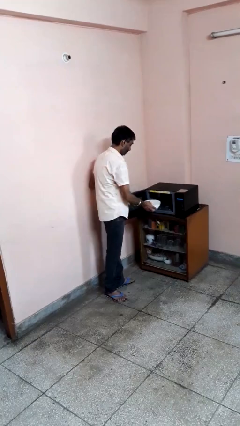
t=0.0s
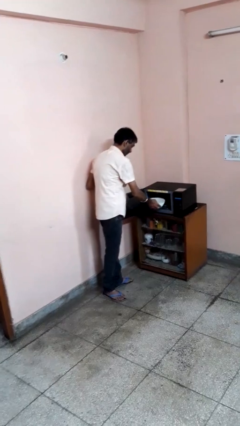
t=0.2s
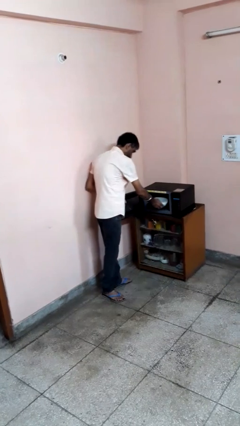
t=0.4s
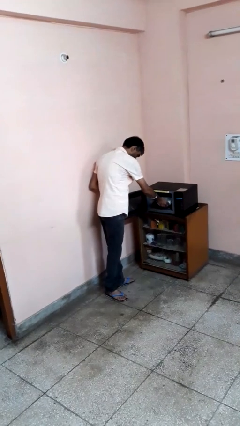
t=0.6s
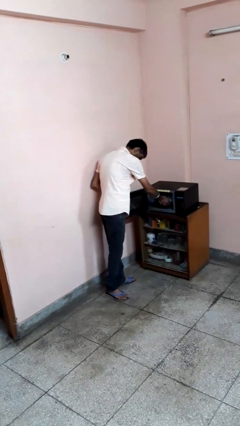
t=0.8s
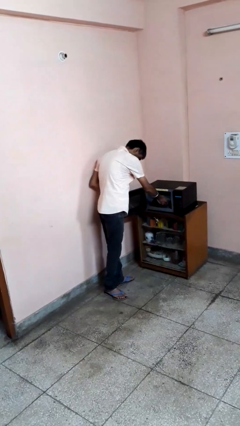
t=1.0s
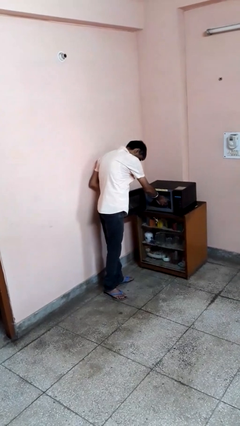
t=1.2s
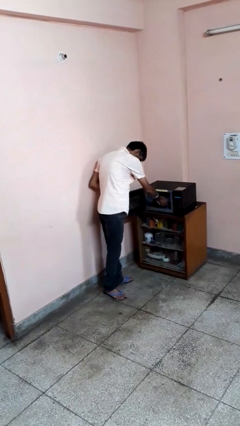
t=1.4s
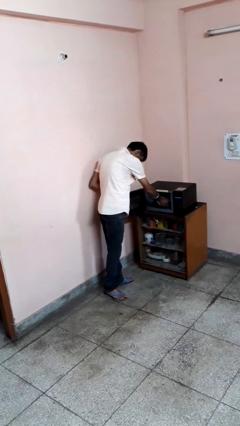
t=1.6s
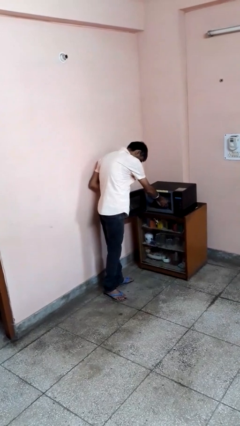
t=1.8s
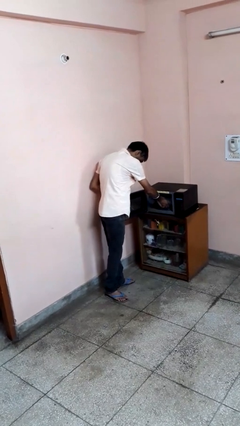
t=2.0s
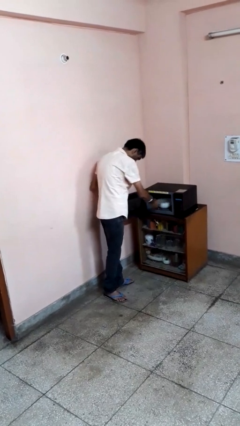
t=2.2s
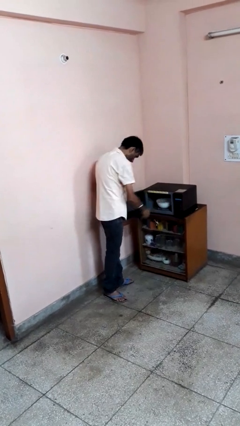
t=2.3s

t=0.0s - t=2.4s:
person puts object into microwave

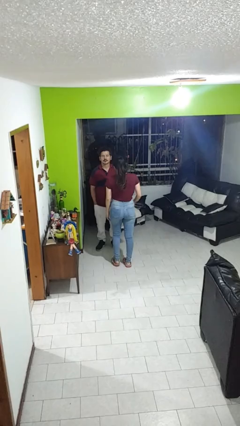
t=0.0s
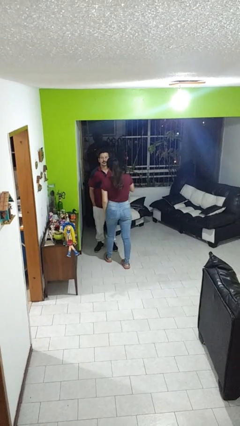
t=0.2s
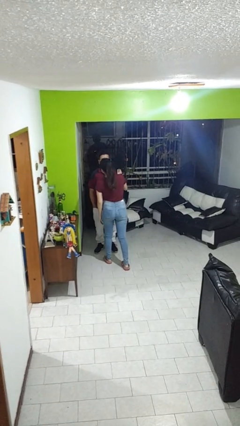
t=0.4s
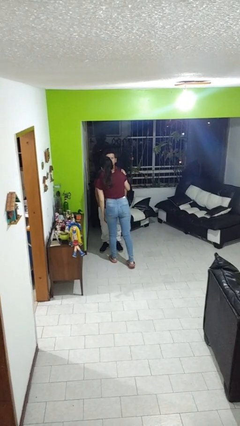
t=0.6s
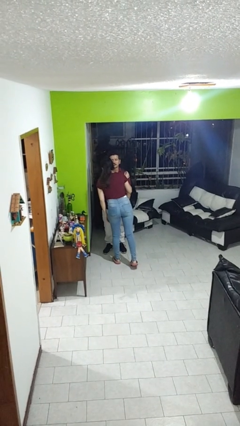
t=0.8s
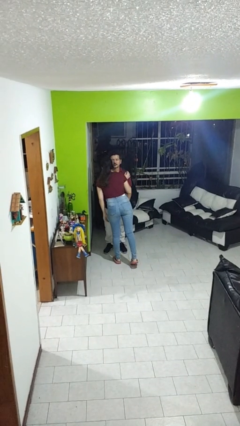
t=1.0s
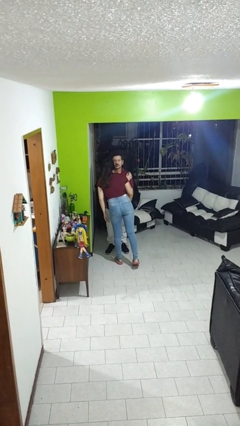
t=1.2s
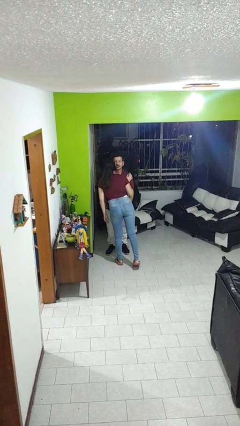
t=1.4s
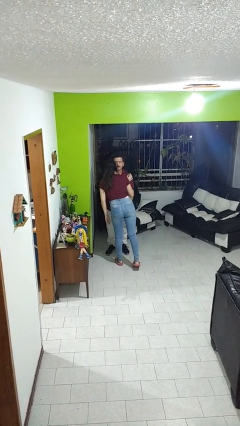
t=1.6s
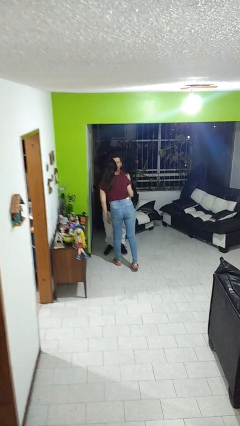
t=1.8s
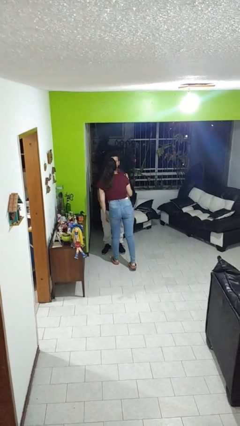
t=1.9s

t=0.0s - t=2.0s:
person kisses cheek of person

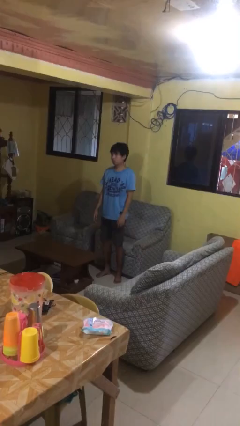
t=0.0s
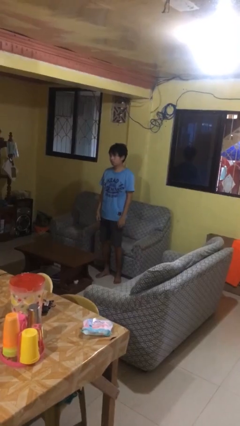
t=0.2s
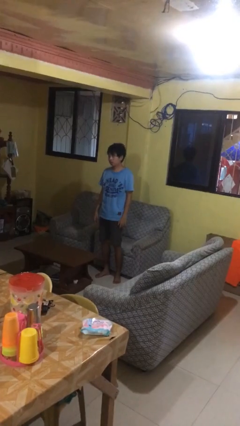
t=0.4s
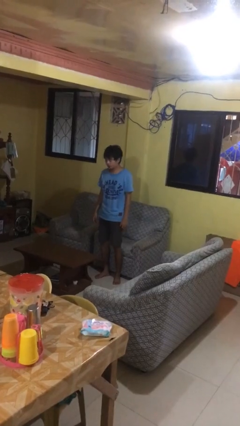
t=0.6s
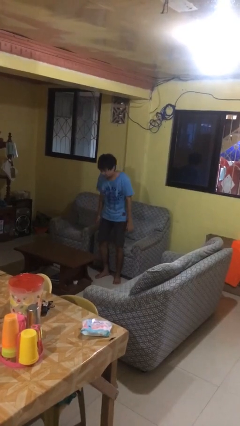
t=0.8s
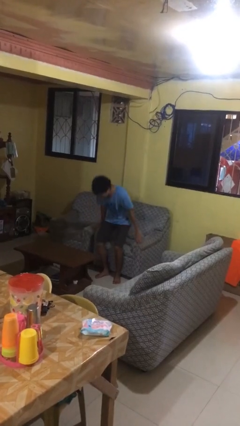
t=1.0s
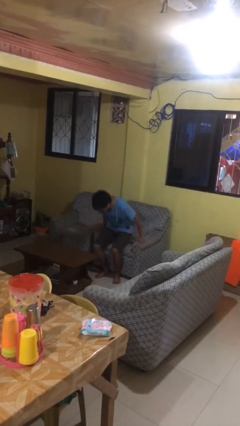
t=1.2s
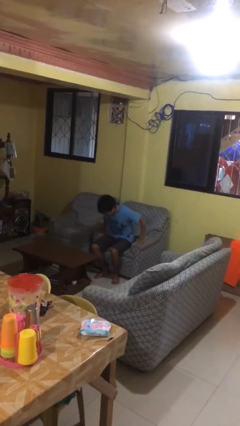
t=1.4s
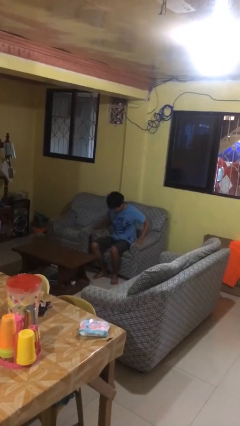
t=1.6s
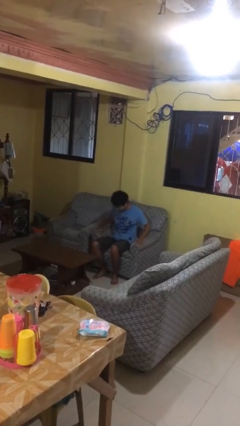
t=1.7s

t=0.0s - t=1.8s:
person lies down on couch

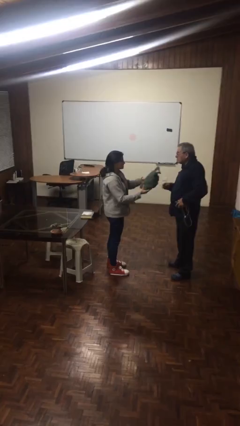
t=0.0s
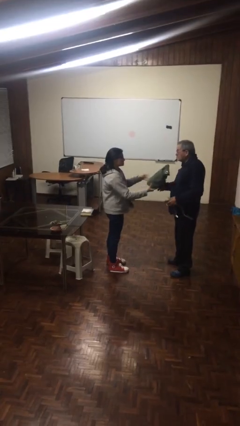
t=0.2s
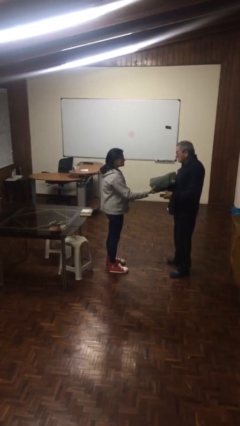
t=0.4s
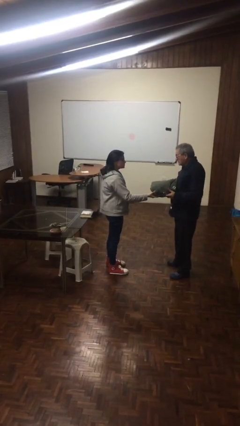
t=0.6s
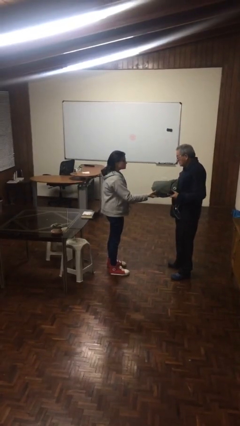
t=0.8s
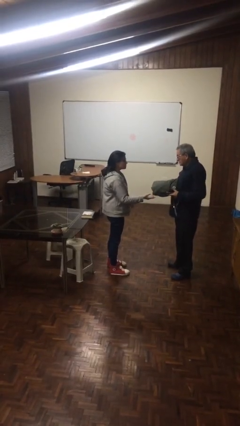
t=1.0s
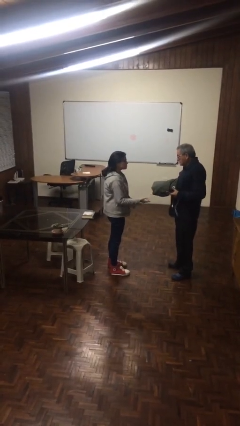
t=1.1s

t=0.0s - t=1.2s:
person transfers object to person

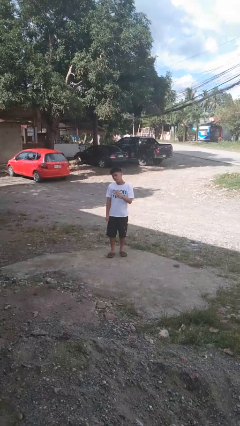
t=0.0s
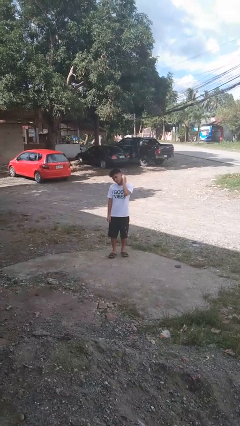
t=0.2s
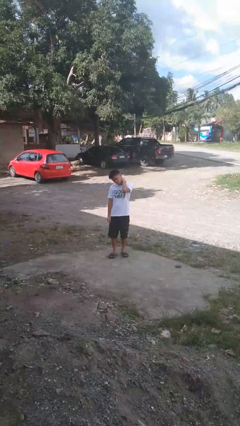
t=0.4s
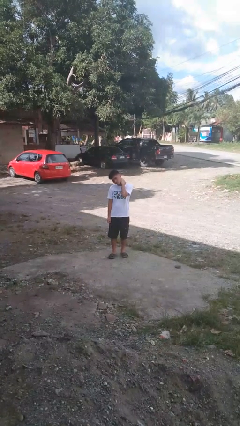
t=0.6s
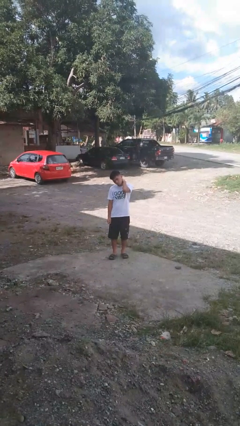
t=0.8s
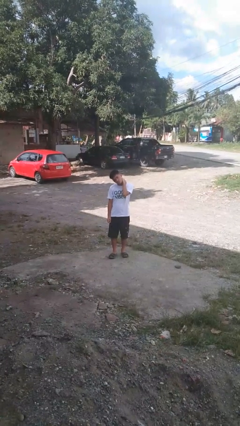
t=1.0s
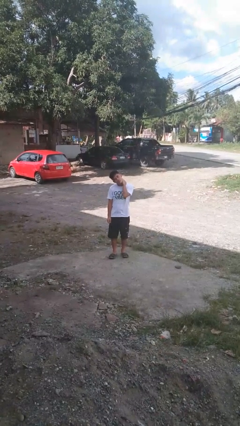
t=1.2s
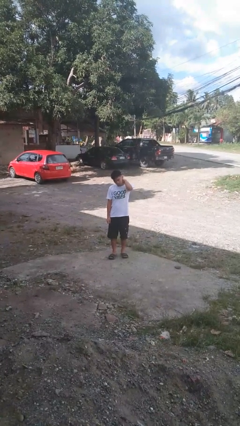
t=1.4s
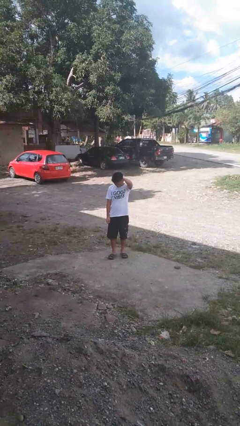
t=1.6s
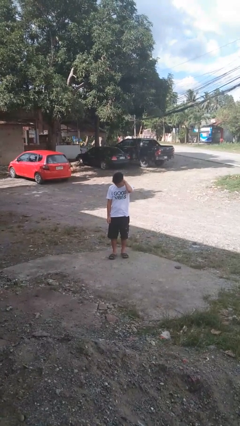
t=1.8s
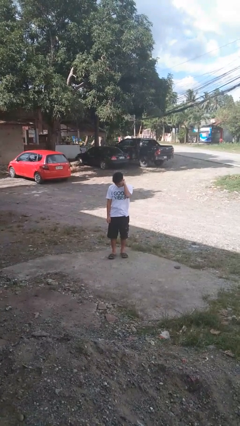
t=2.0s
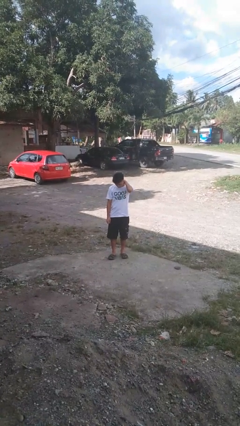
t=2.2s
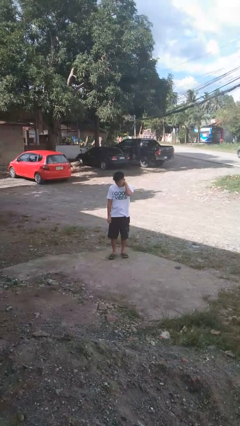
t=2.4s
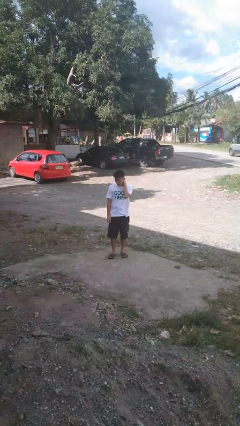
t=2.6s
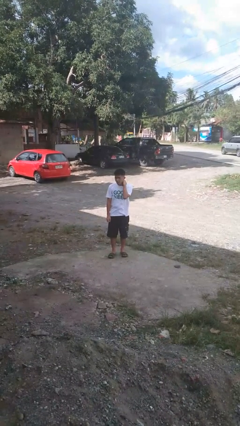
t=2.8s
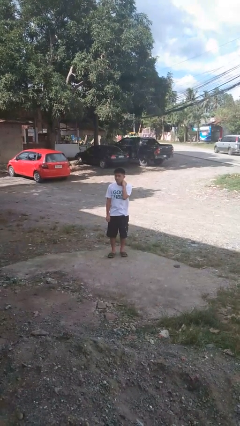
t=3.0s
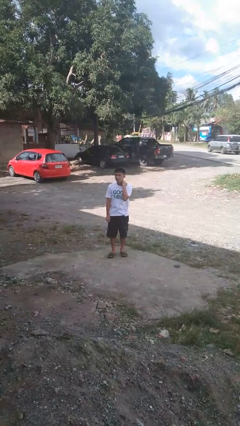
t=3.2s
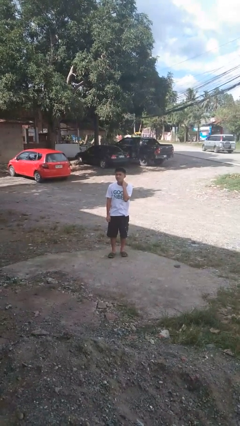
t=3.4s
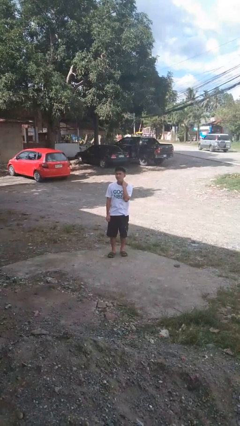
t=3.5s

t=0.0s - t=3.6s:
person rubs neck

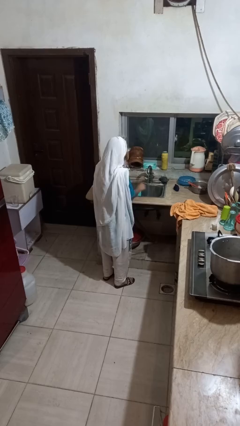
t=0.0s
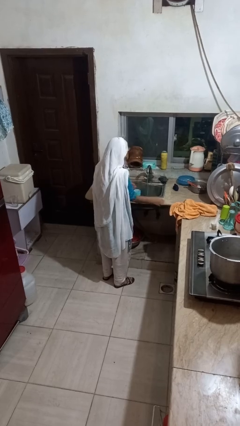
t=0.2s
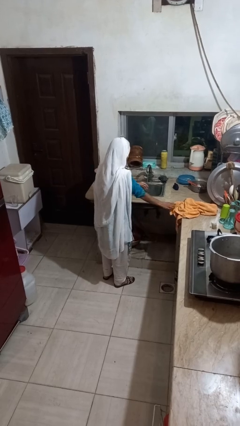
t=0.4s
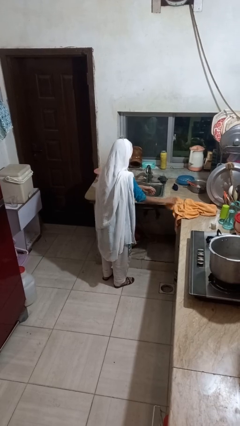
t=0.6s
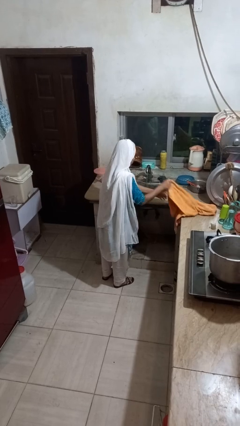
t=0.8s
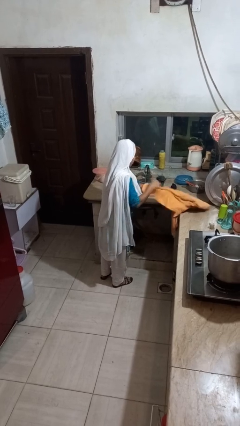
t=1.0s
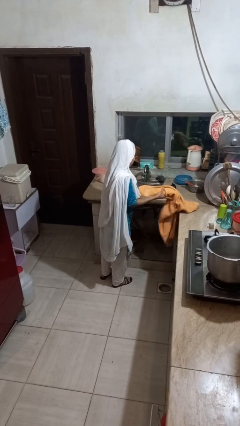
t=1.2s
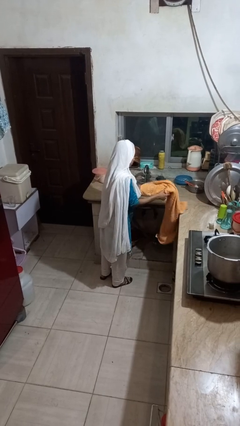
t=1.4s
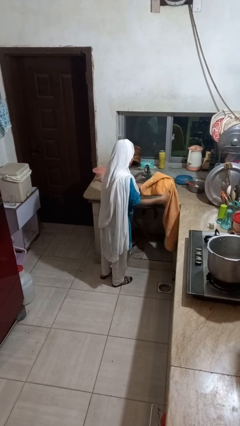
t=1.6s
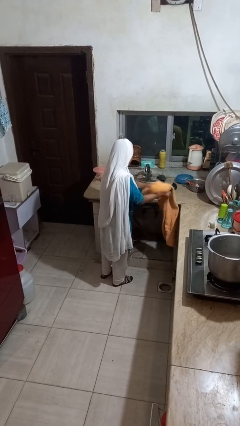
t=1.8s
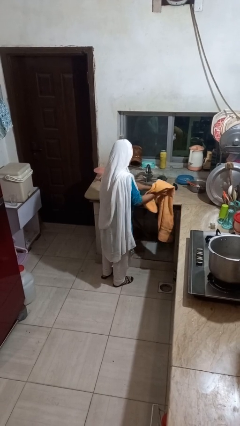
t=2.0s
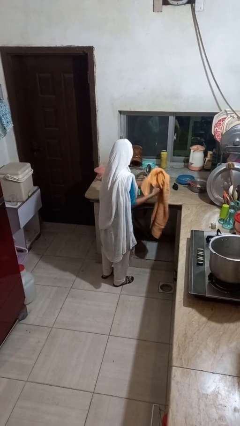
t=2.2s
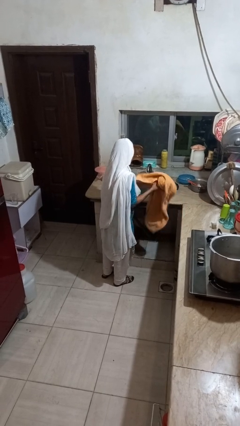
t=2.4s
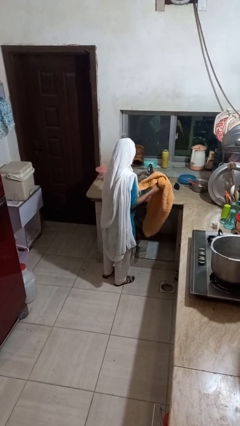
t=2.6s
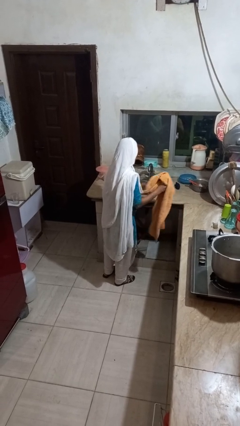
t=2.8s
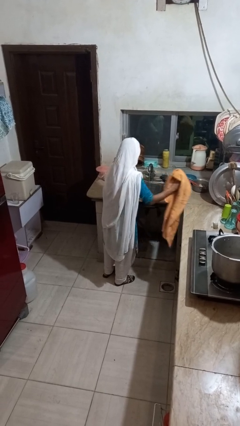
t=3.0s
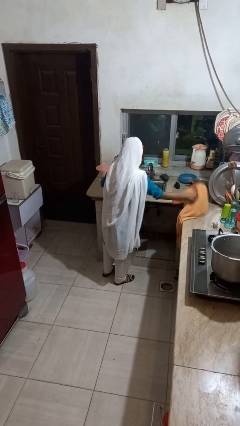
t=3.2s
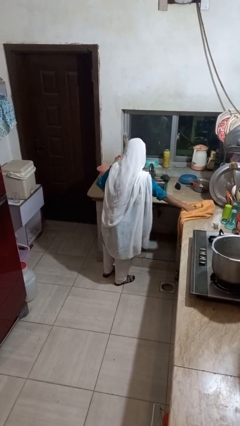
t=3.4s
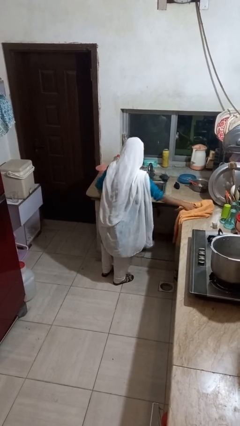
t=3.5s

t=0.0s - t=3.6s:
person dries hands with towel

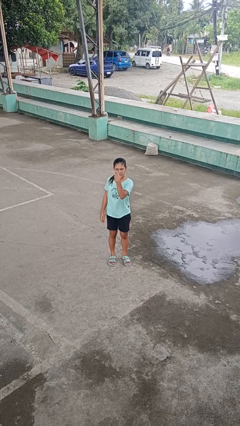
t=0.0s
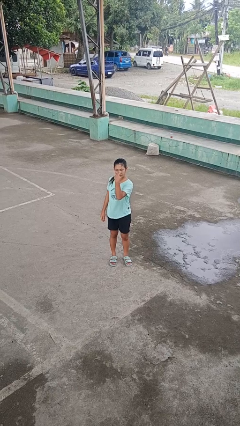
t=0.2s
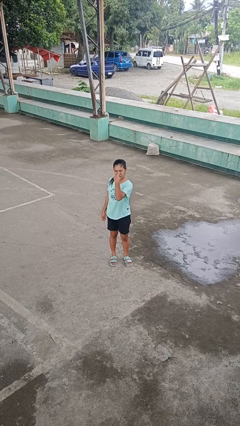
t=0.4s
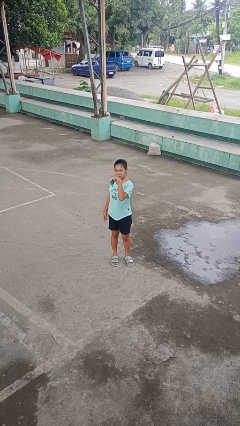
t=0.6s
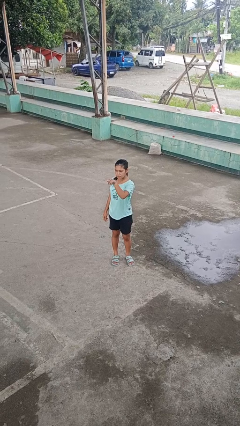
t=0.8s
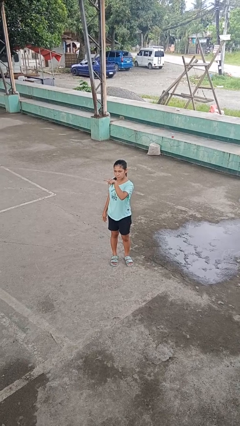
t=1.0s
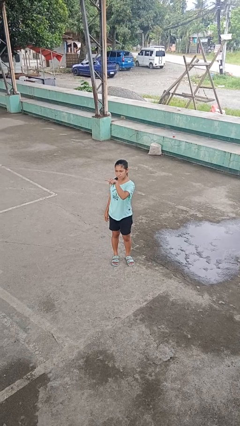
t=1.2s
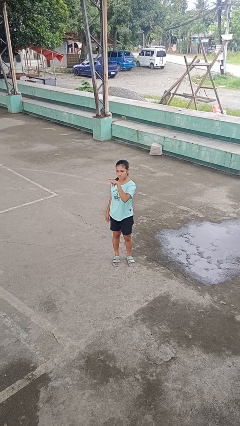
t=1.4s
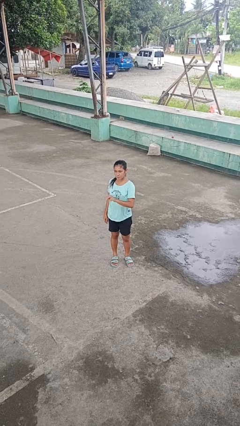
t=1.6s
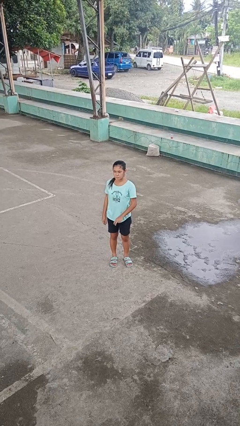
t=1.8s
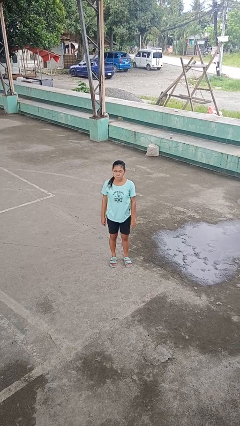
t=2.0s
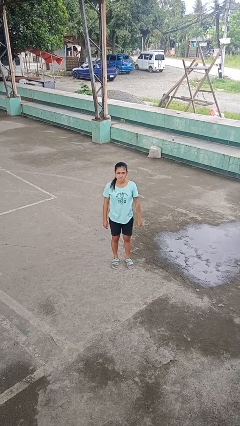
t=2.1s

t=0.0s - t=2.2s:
person gestures watch closely
